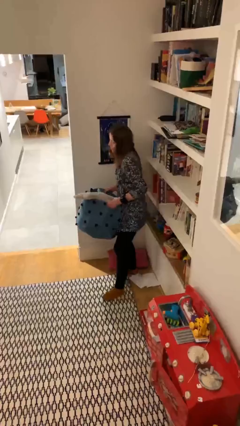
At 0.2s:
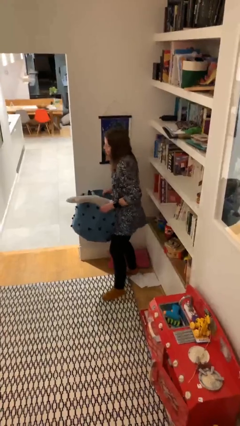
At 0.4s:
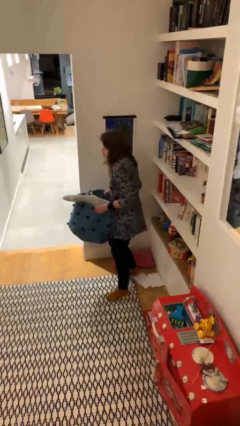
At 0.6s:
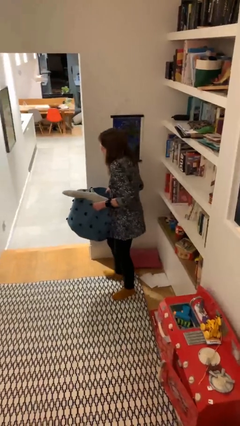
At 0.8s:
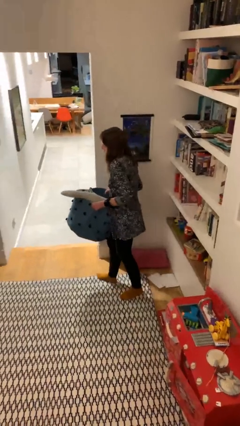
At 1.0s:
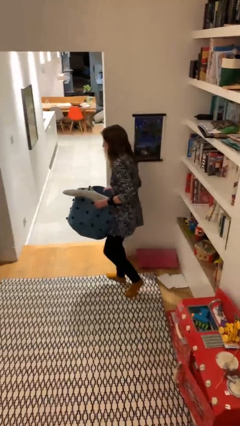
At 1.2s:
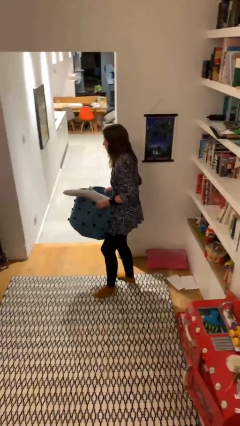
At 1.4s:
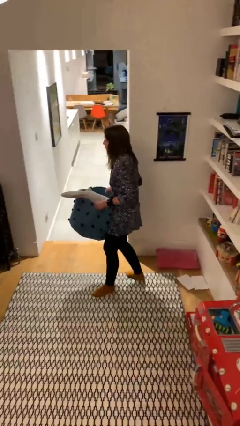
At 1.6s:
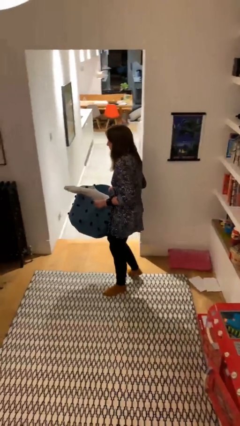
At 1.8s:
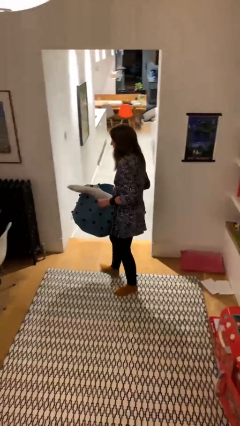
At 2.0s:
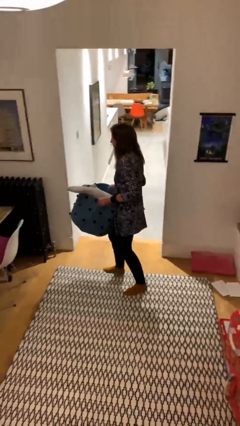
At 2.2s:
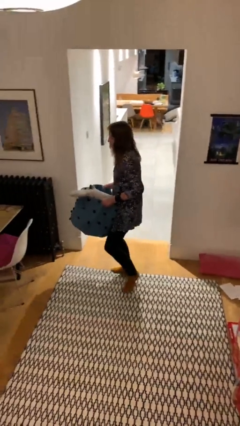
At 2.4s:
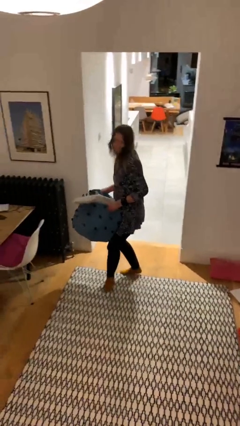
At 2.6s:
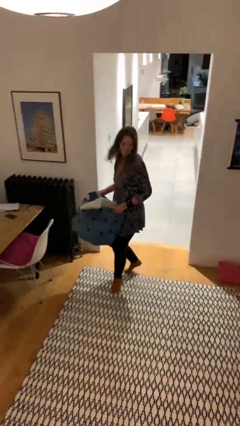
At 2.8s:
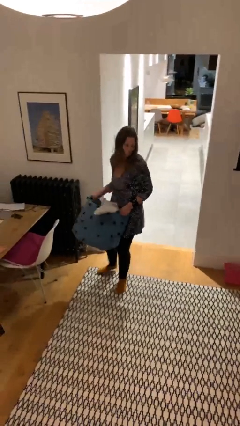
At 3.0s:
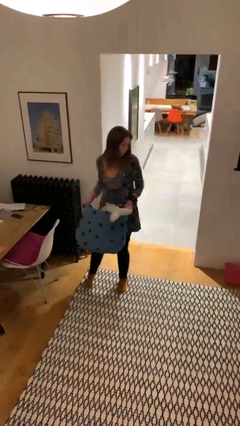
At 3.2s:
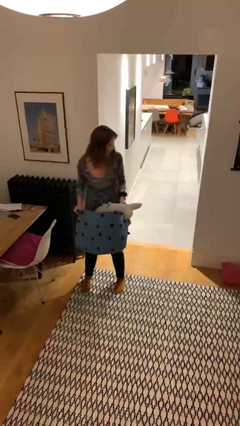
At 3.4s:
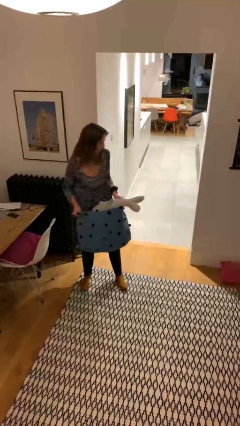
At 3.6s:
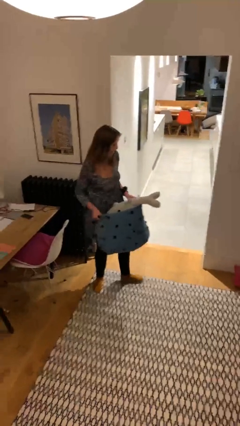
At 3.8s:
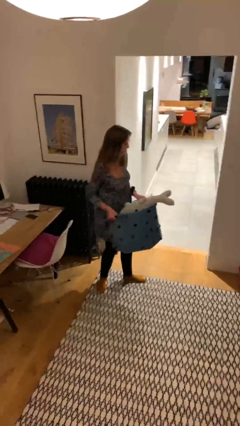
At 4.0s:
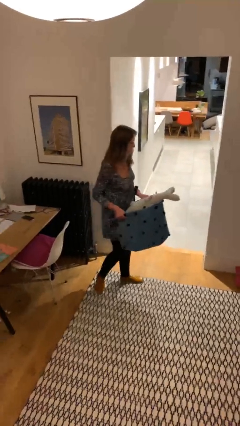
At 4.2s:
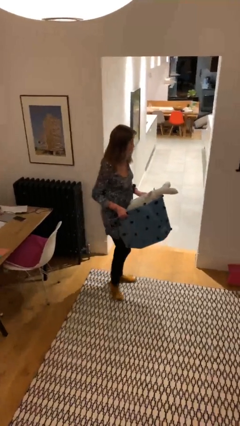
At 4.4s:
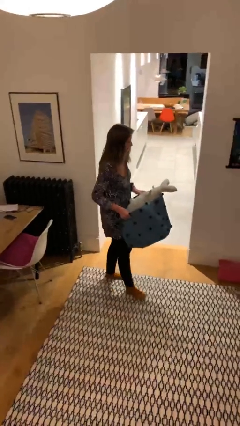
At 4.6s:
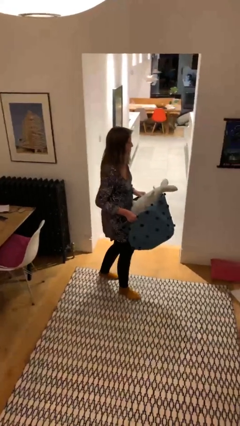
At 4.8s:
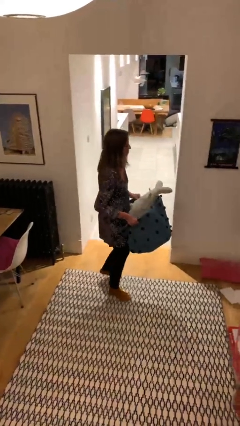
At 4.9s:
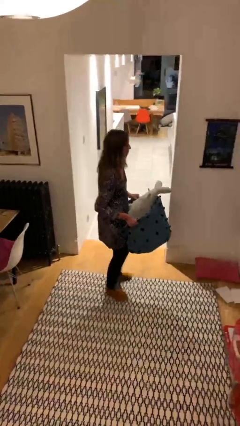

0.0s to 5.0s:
person carries heavy object

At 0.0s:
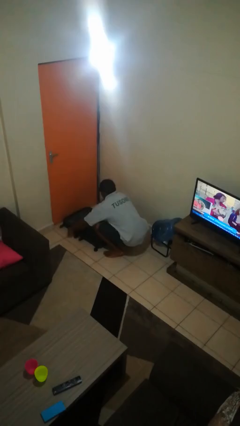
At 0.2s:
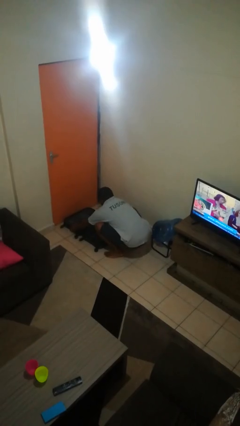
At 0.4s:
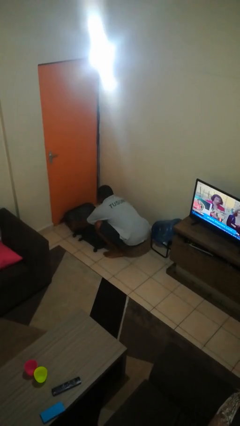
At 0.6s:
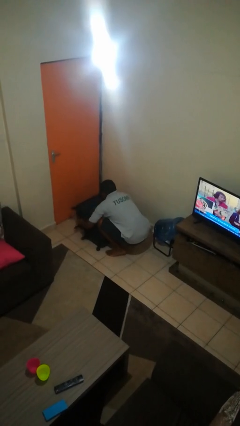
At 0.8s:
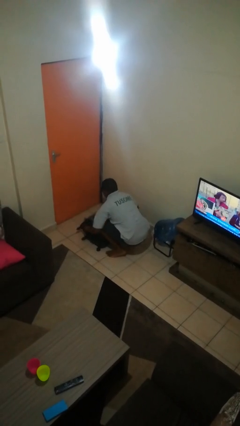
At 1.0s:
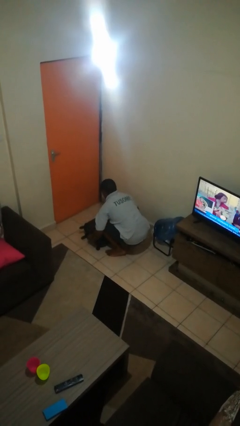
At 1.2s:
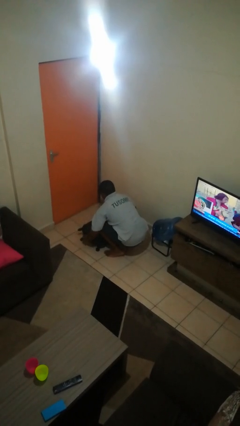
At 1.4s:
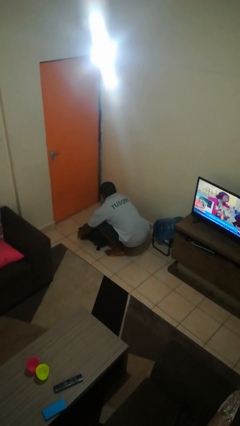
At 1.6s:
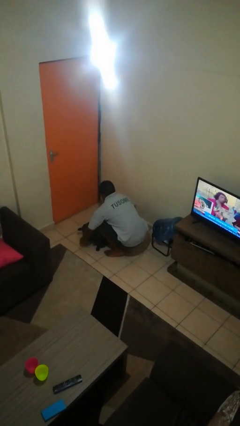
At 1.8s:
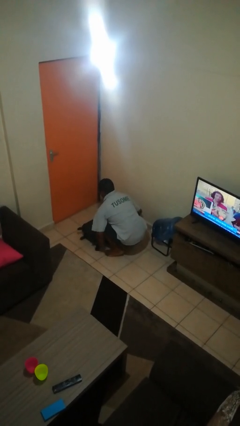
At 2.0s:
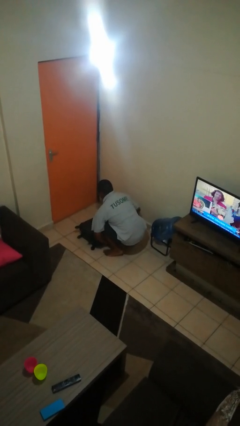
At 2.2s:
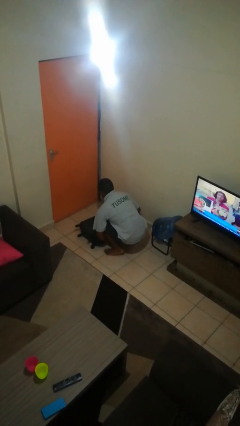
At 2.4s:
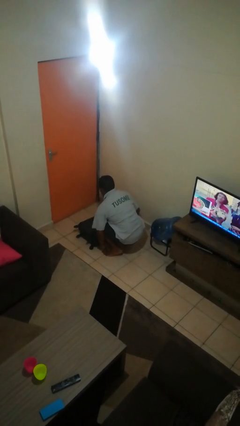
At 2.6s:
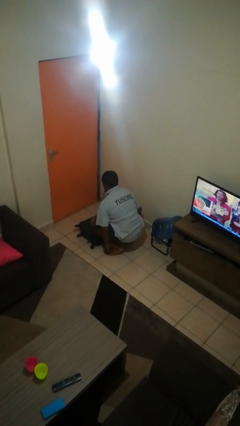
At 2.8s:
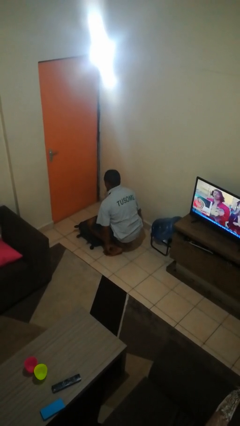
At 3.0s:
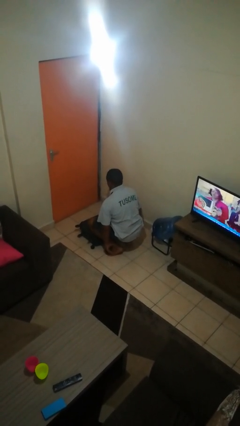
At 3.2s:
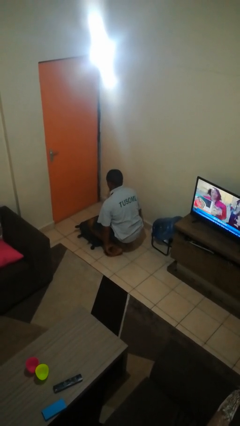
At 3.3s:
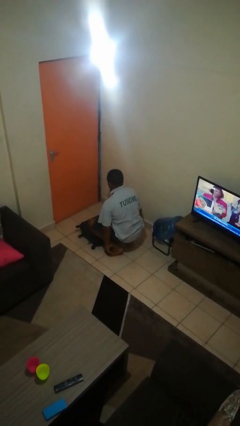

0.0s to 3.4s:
person closes suitcase

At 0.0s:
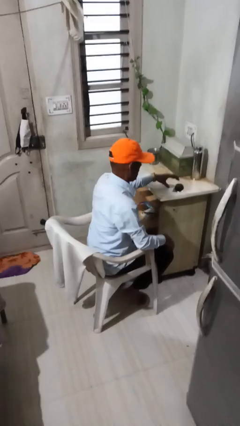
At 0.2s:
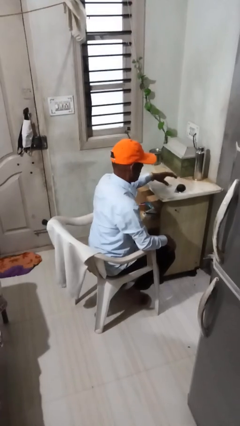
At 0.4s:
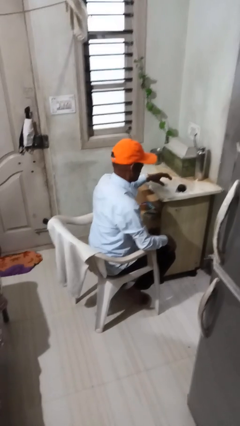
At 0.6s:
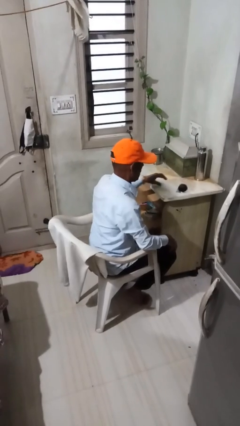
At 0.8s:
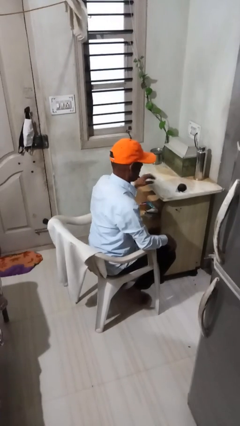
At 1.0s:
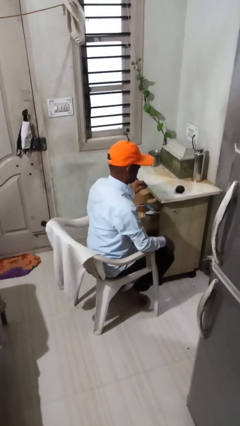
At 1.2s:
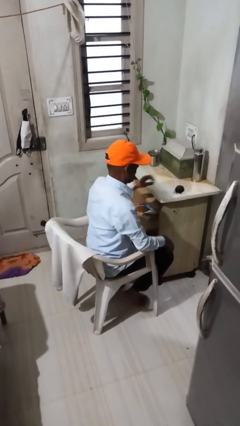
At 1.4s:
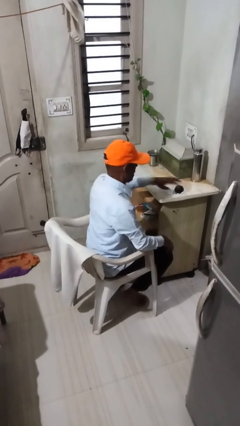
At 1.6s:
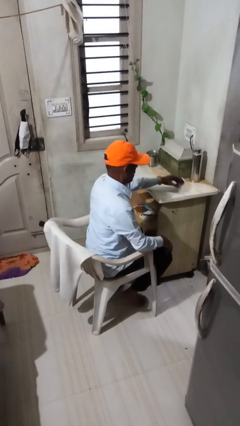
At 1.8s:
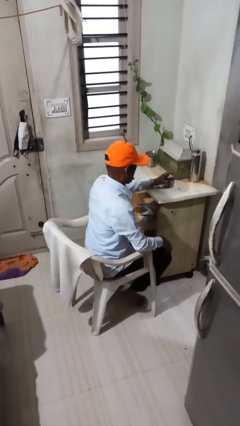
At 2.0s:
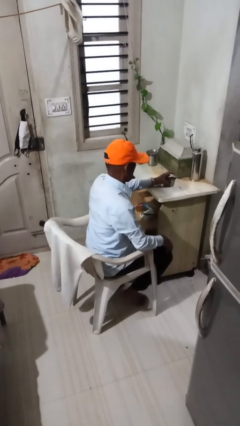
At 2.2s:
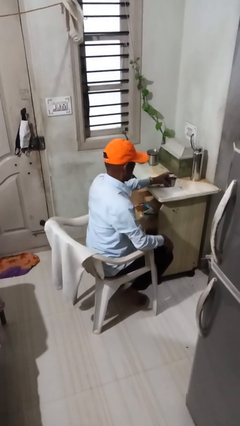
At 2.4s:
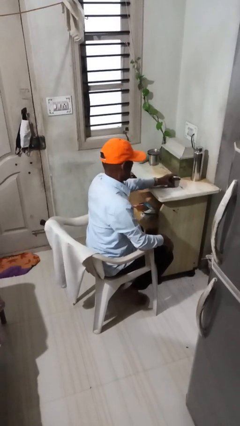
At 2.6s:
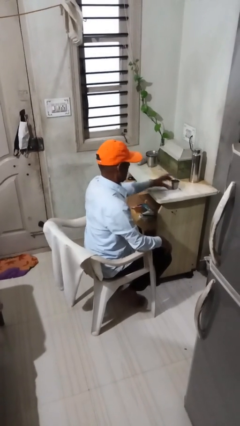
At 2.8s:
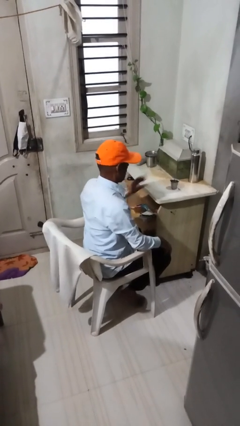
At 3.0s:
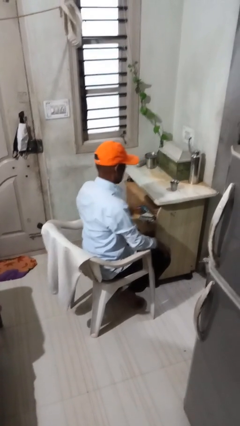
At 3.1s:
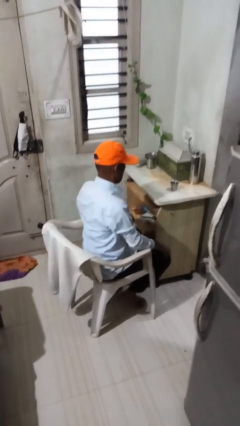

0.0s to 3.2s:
person sets upright glass

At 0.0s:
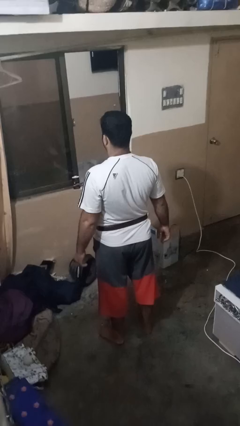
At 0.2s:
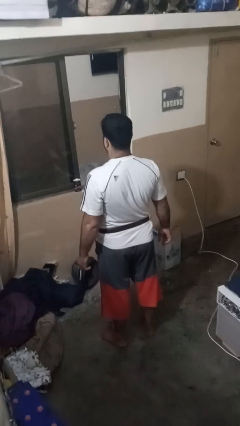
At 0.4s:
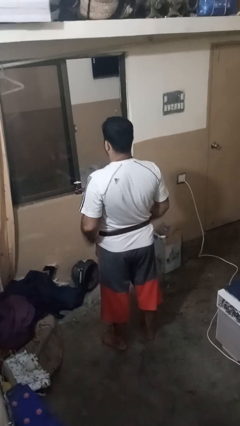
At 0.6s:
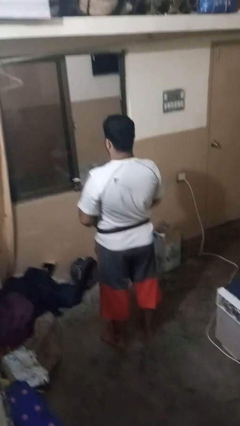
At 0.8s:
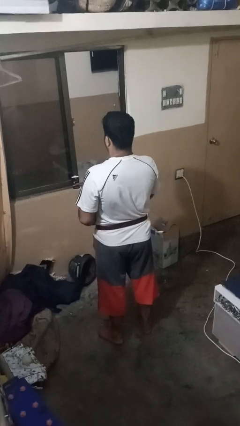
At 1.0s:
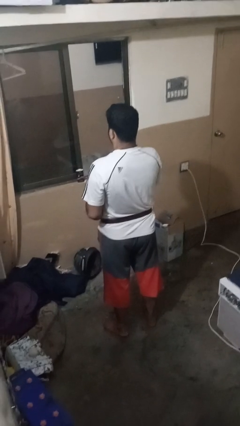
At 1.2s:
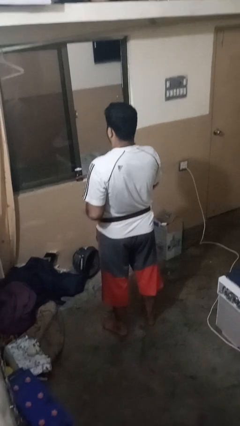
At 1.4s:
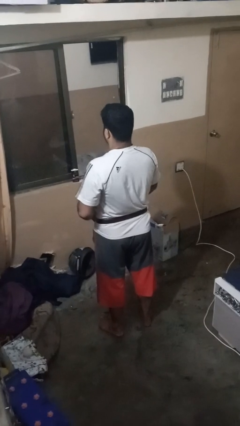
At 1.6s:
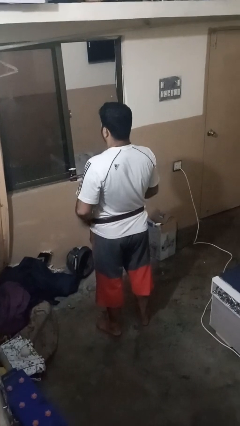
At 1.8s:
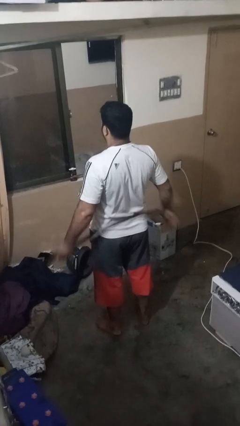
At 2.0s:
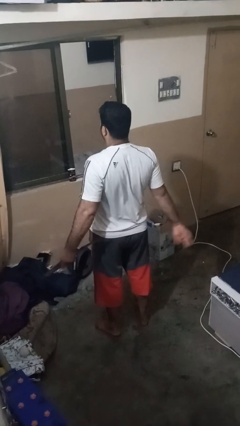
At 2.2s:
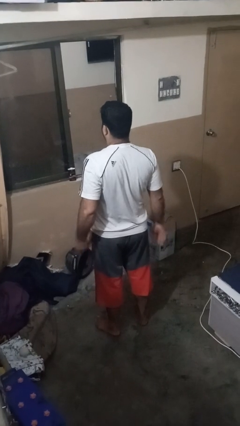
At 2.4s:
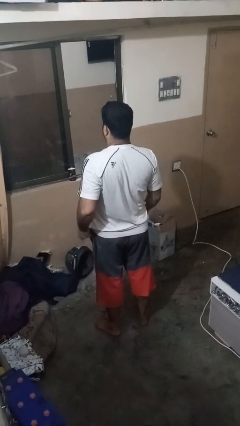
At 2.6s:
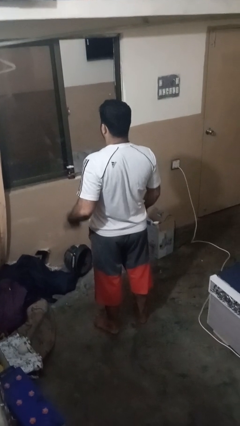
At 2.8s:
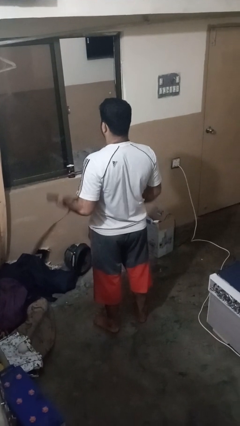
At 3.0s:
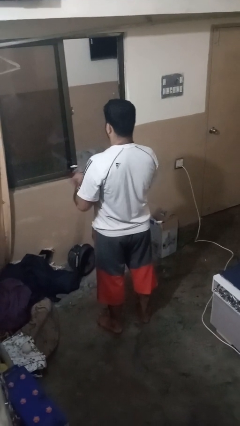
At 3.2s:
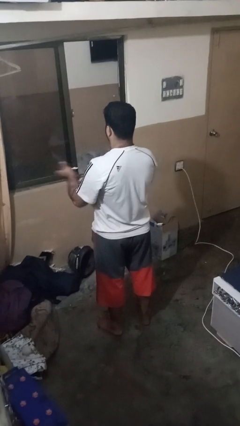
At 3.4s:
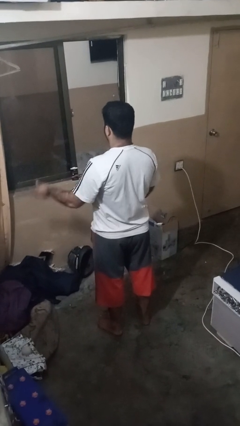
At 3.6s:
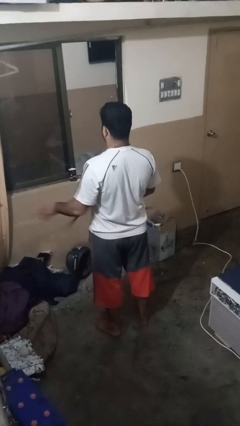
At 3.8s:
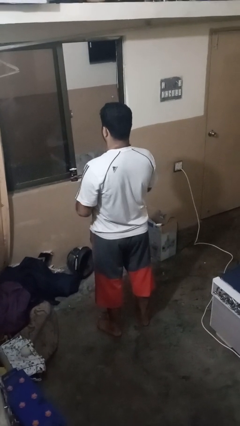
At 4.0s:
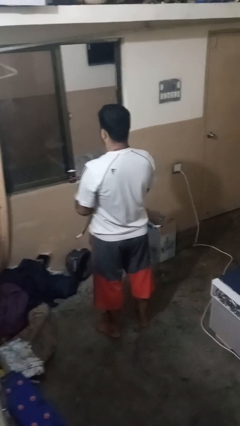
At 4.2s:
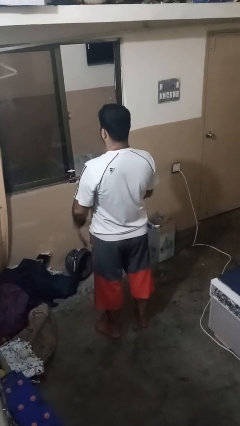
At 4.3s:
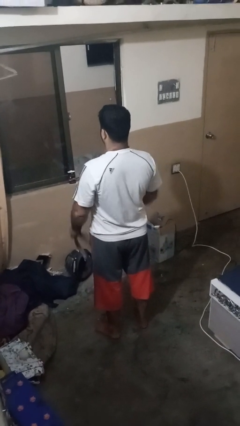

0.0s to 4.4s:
person takes off belt

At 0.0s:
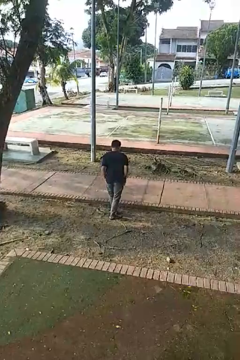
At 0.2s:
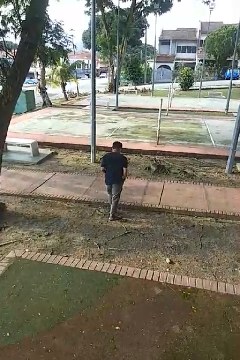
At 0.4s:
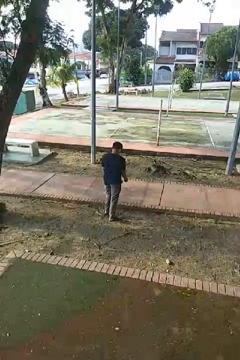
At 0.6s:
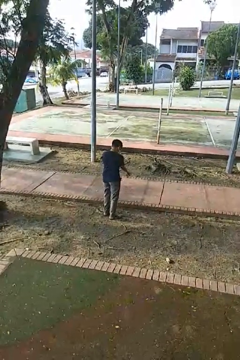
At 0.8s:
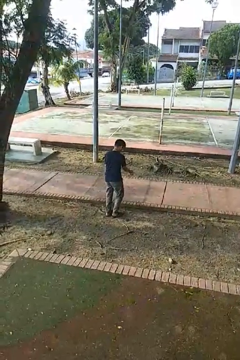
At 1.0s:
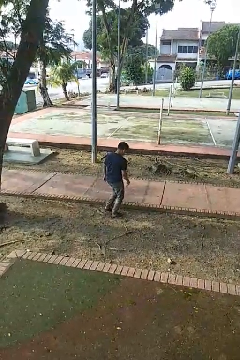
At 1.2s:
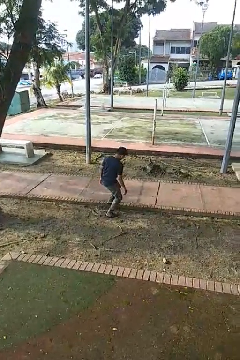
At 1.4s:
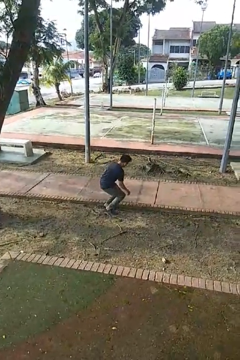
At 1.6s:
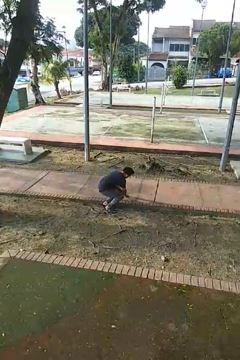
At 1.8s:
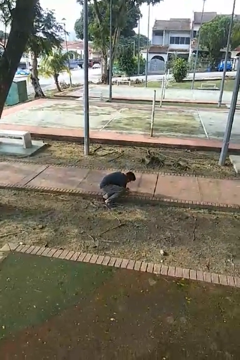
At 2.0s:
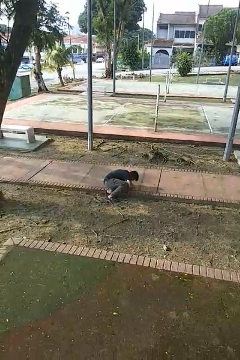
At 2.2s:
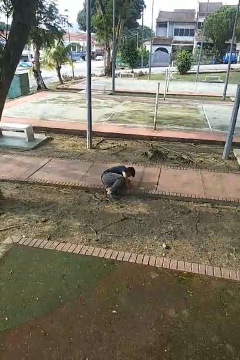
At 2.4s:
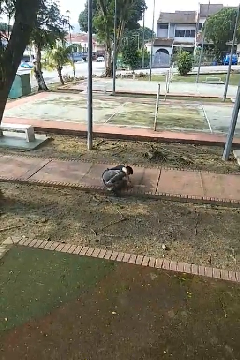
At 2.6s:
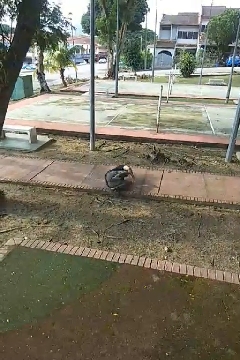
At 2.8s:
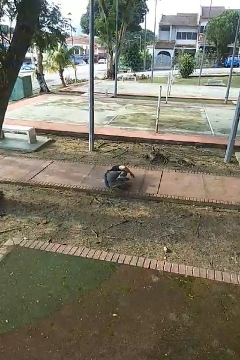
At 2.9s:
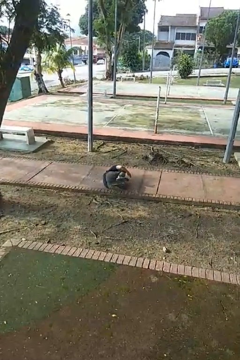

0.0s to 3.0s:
person trips on object on floor
